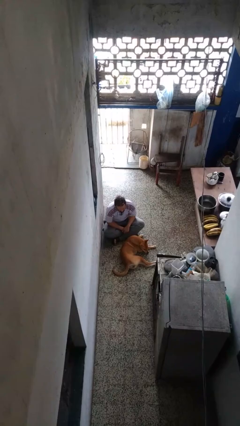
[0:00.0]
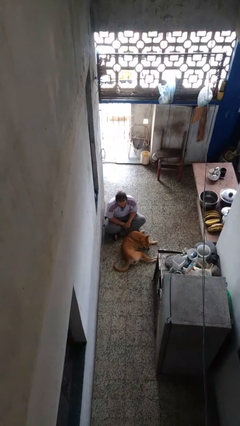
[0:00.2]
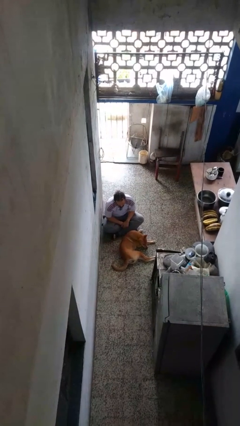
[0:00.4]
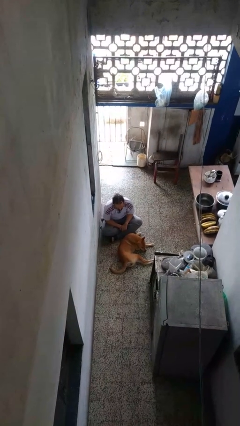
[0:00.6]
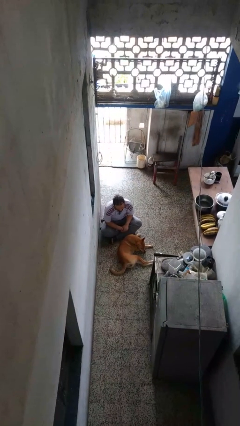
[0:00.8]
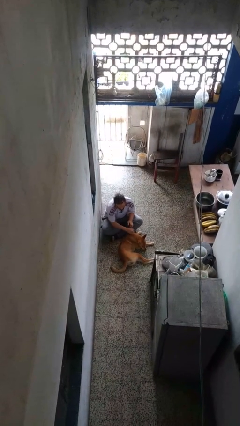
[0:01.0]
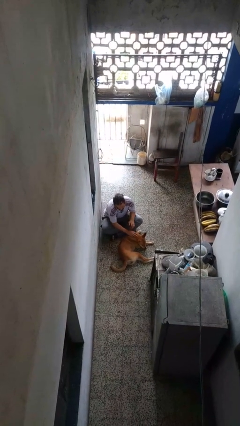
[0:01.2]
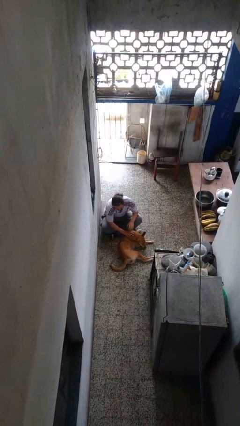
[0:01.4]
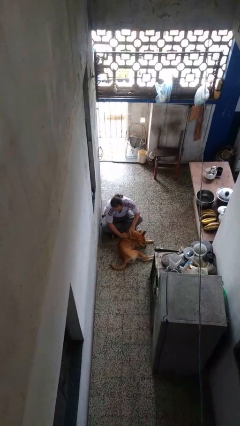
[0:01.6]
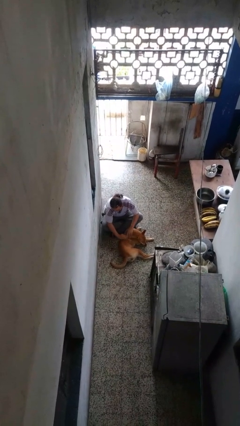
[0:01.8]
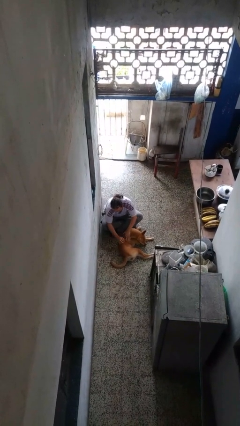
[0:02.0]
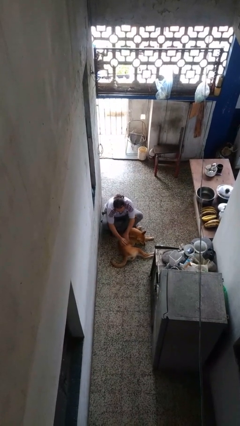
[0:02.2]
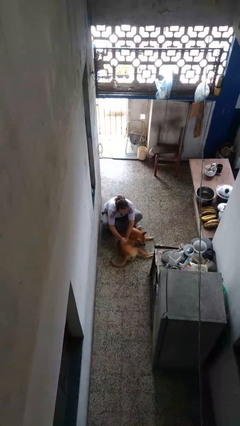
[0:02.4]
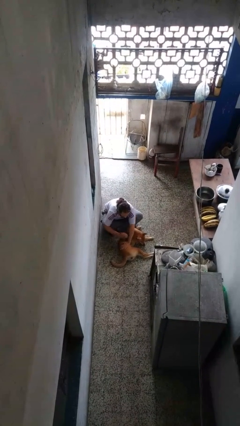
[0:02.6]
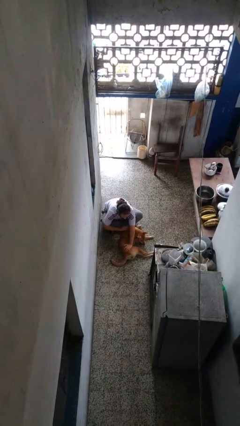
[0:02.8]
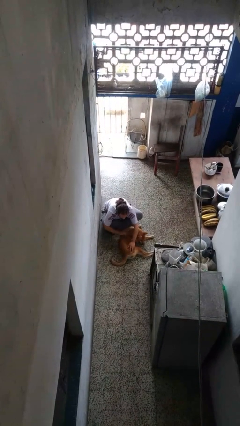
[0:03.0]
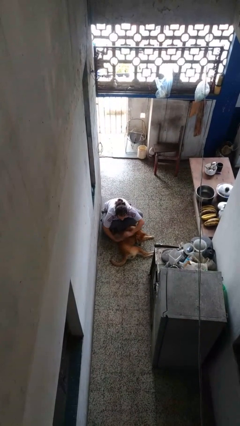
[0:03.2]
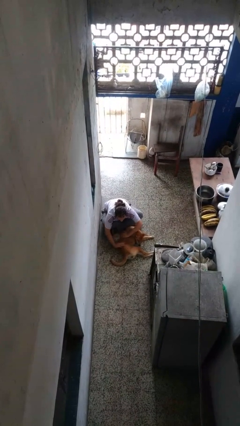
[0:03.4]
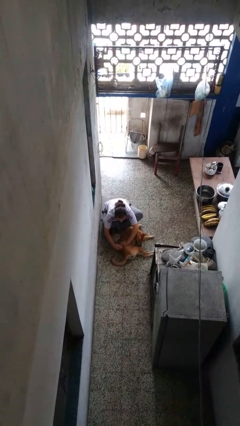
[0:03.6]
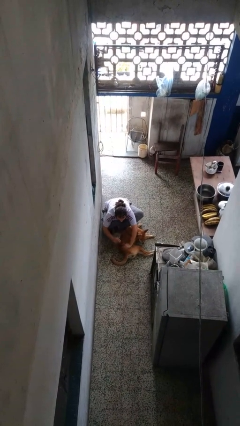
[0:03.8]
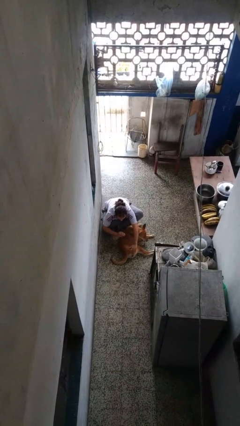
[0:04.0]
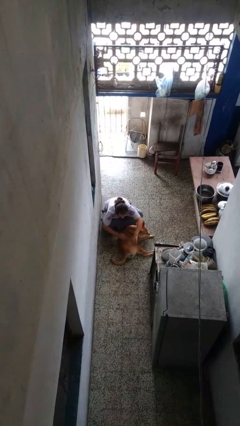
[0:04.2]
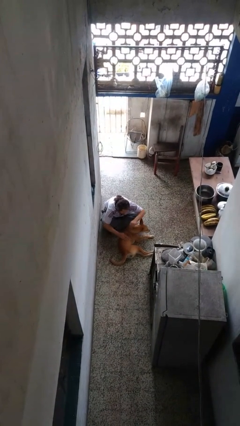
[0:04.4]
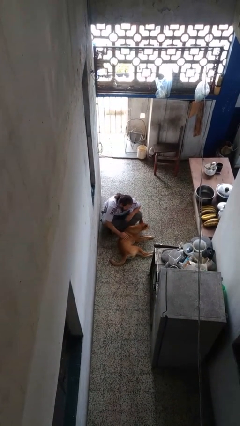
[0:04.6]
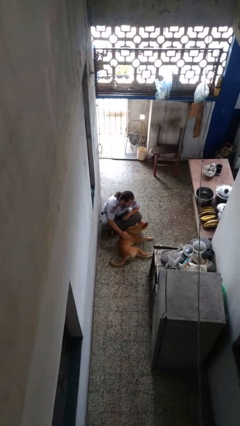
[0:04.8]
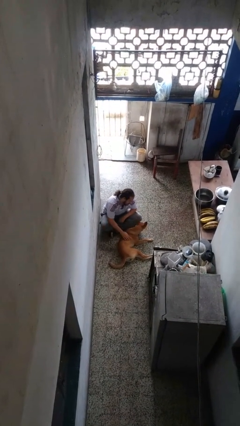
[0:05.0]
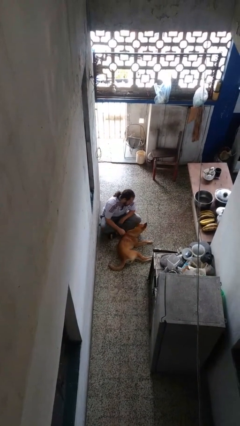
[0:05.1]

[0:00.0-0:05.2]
person pets dog

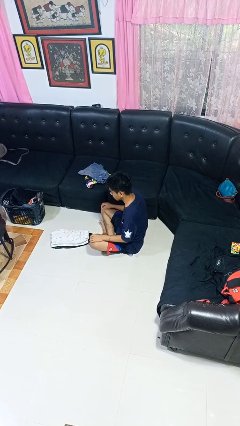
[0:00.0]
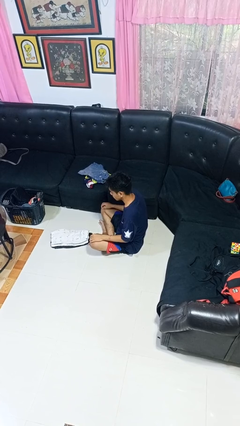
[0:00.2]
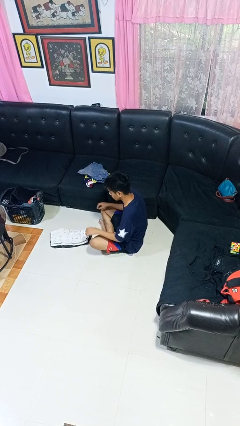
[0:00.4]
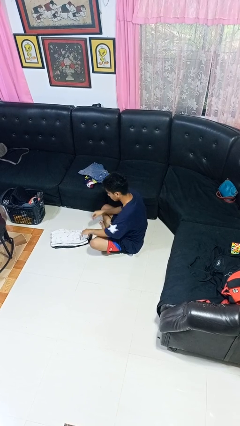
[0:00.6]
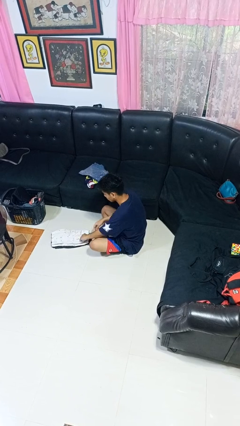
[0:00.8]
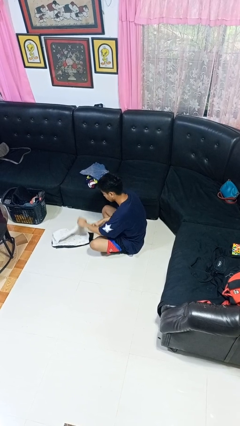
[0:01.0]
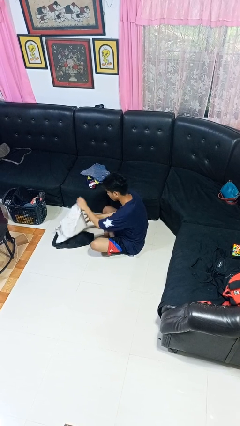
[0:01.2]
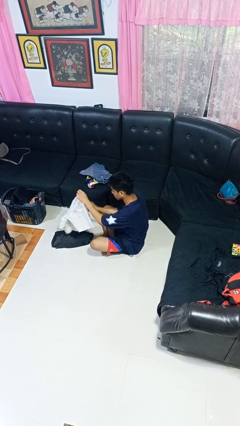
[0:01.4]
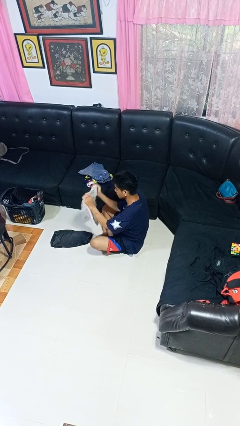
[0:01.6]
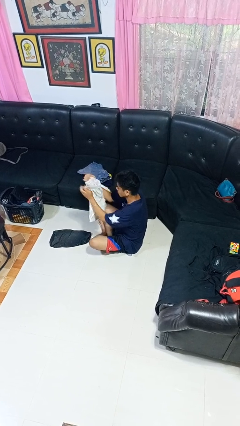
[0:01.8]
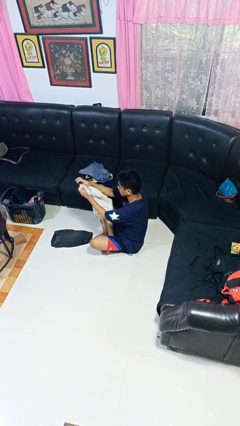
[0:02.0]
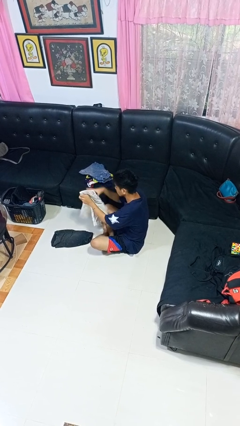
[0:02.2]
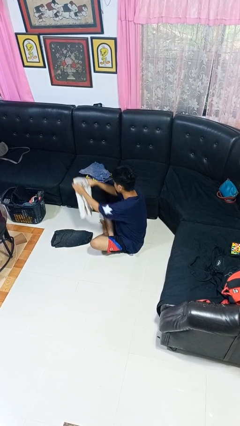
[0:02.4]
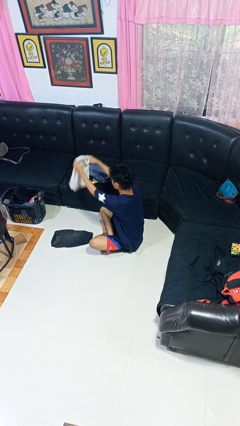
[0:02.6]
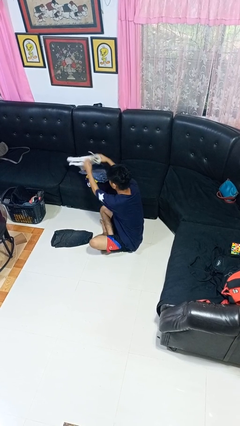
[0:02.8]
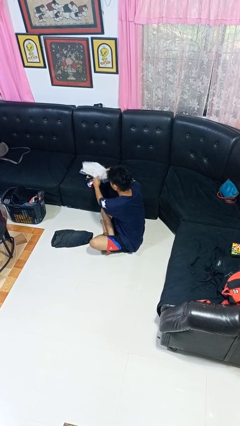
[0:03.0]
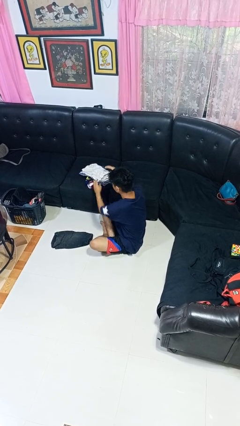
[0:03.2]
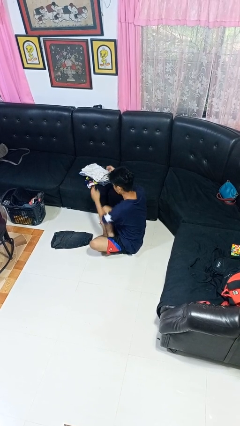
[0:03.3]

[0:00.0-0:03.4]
person folds pants

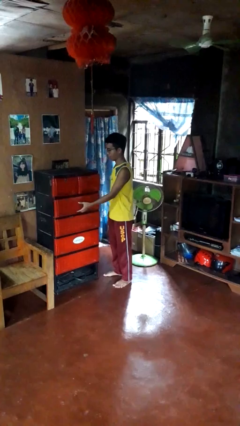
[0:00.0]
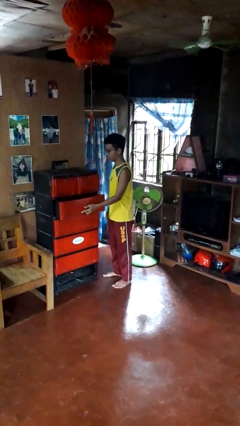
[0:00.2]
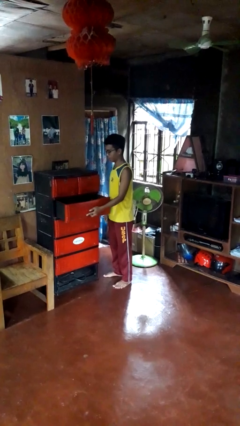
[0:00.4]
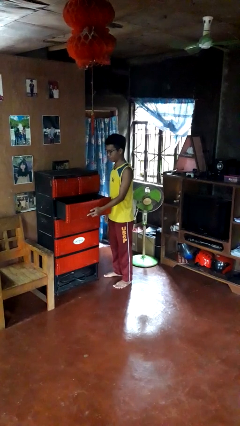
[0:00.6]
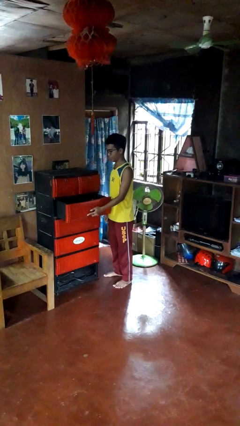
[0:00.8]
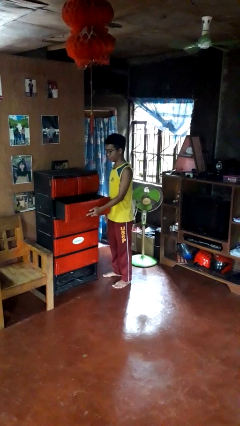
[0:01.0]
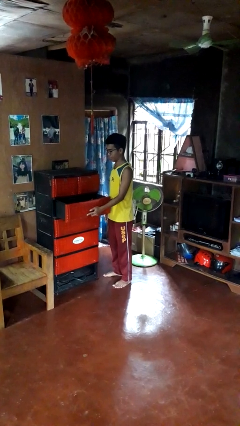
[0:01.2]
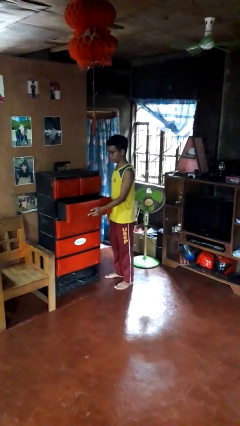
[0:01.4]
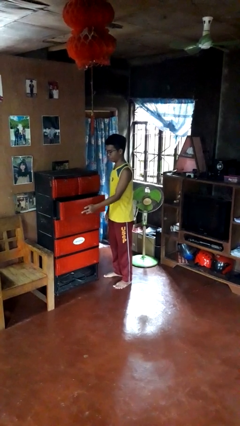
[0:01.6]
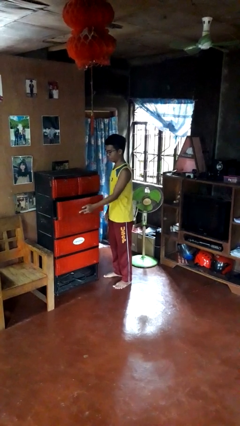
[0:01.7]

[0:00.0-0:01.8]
person opens dresser drawer

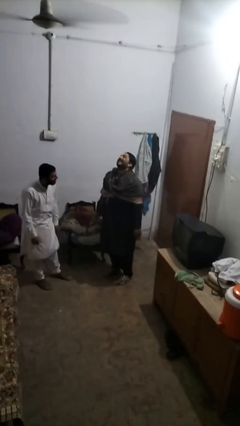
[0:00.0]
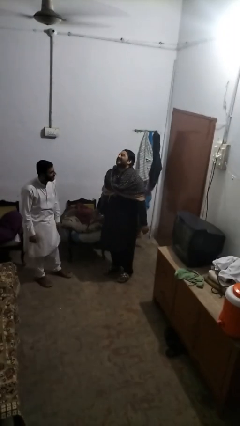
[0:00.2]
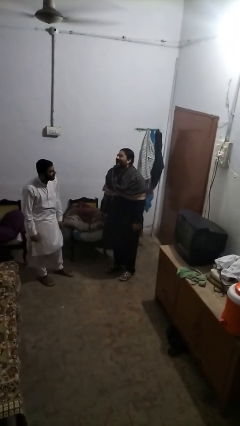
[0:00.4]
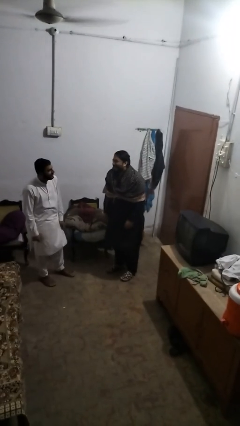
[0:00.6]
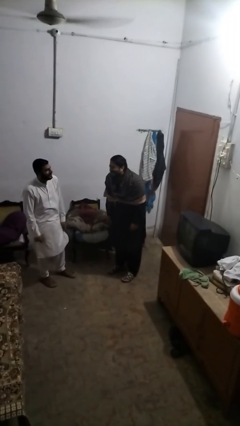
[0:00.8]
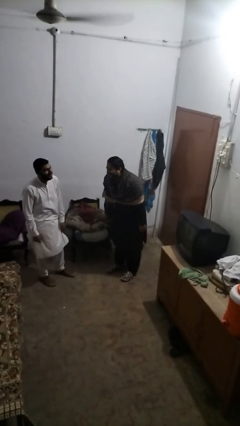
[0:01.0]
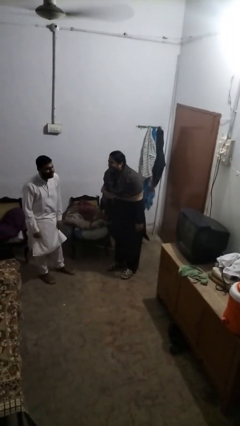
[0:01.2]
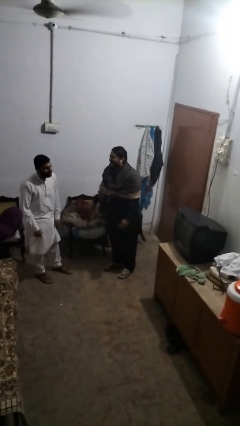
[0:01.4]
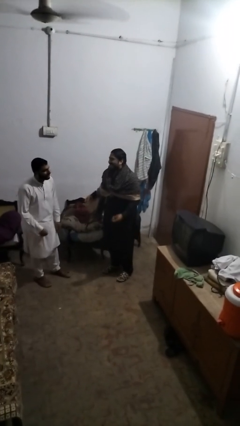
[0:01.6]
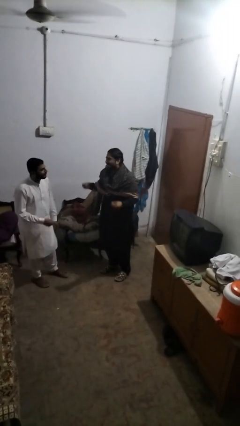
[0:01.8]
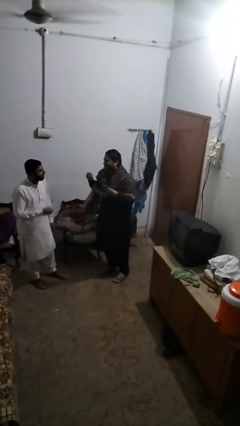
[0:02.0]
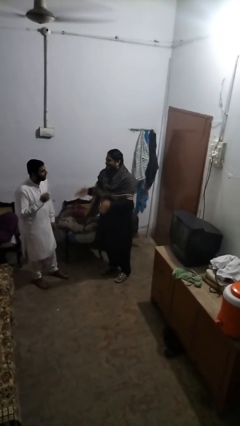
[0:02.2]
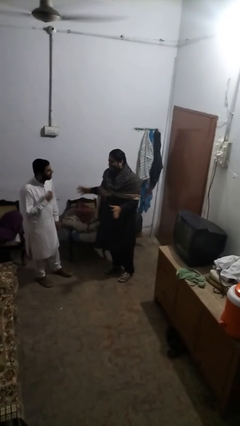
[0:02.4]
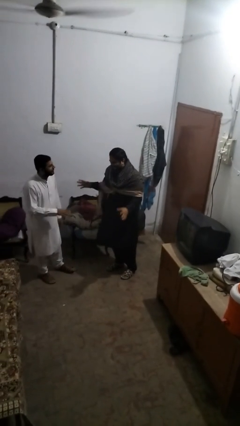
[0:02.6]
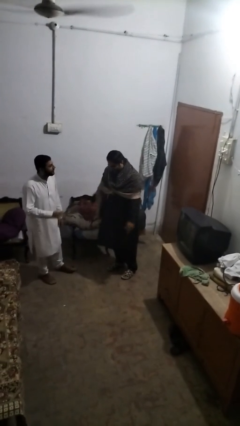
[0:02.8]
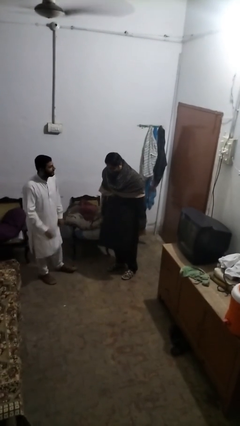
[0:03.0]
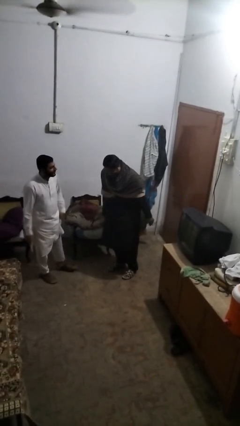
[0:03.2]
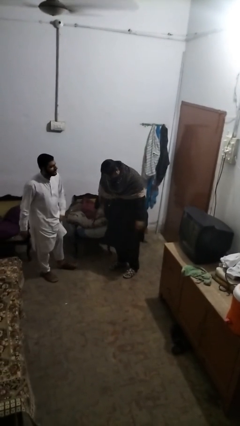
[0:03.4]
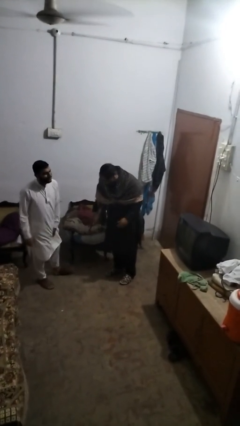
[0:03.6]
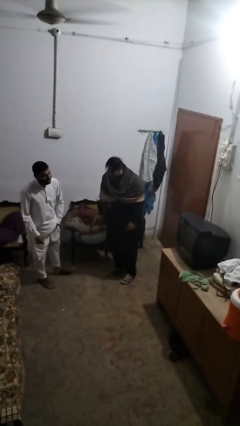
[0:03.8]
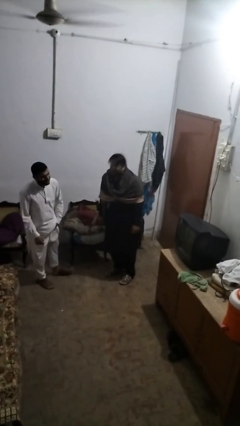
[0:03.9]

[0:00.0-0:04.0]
person laughs with person

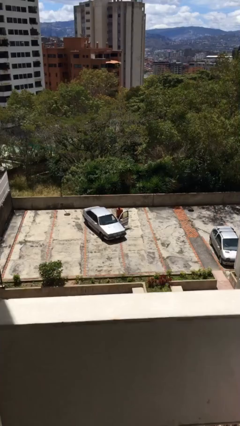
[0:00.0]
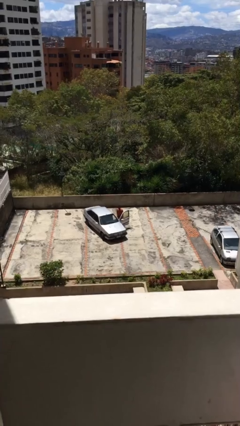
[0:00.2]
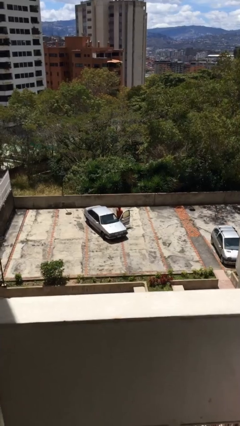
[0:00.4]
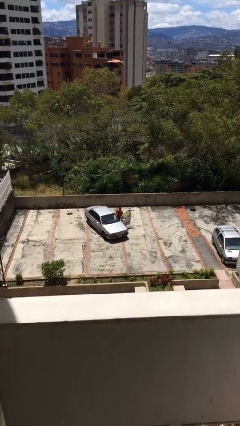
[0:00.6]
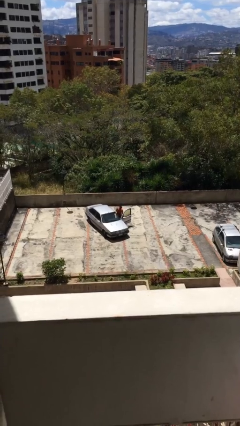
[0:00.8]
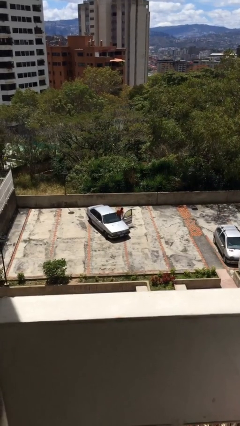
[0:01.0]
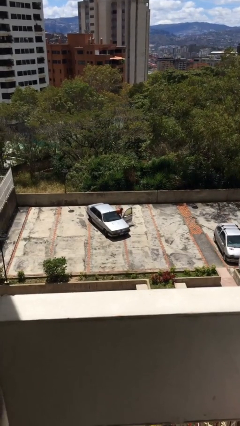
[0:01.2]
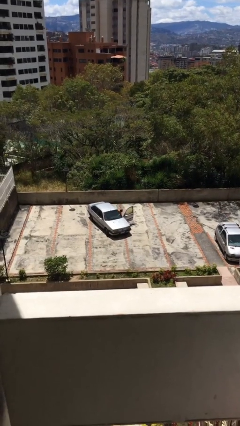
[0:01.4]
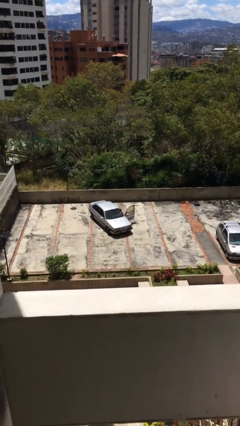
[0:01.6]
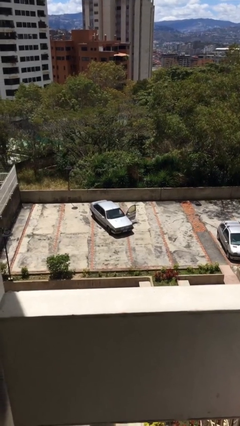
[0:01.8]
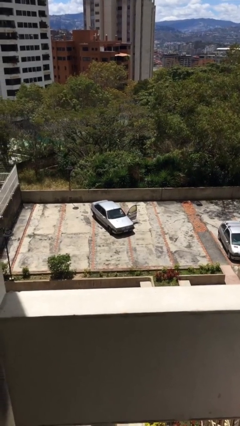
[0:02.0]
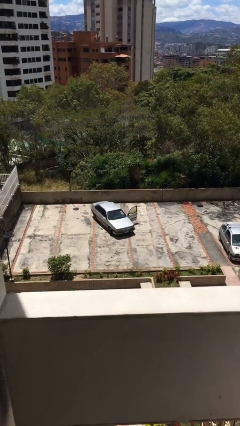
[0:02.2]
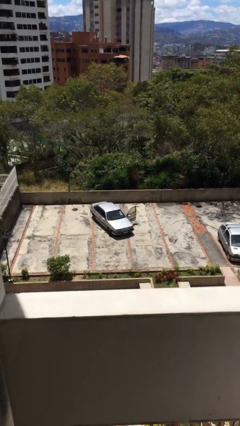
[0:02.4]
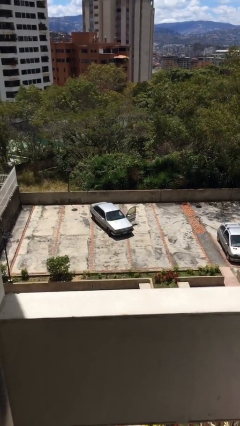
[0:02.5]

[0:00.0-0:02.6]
person enters car

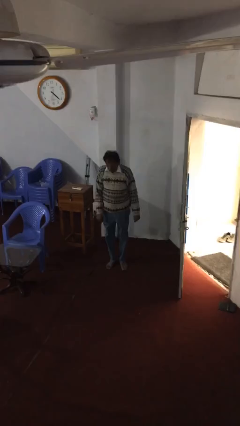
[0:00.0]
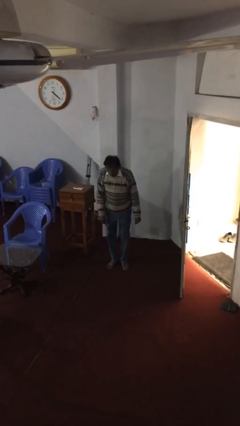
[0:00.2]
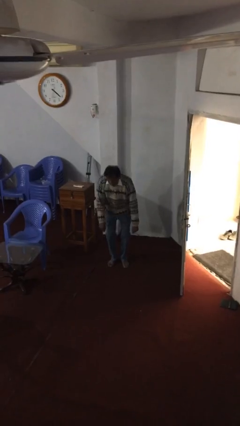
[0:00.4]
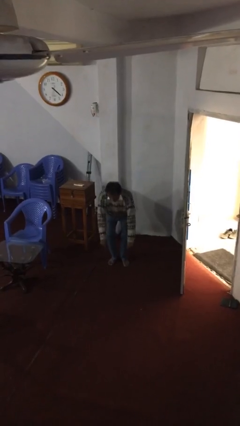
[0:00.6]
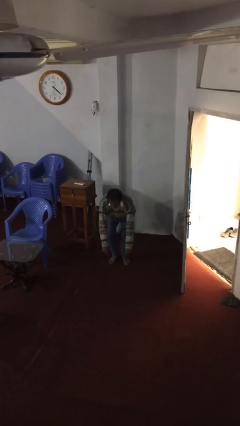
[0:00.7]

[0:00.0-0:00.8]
person sits down
